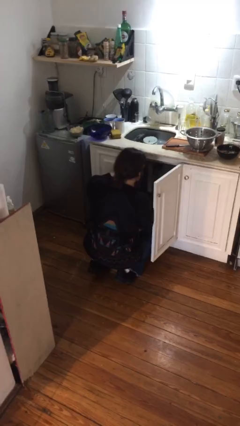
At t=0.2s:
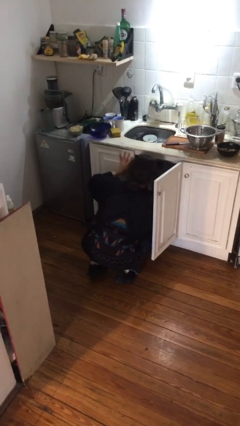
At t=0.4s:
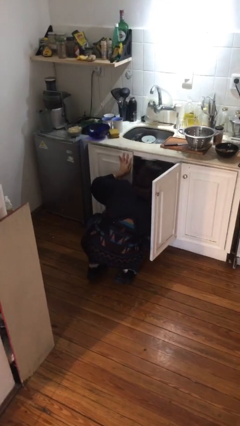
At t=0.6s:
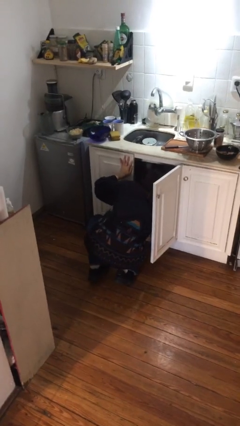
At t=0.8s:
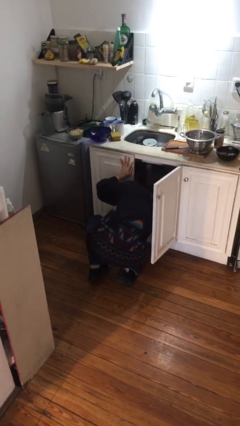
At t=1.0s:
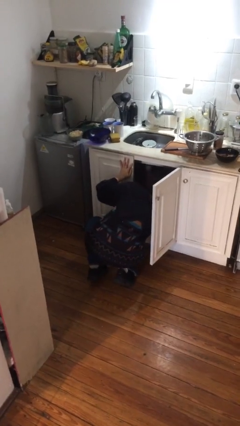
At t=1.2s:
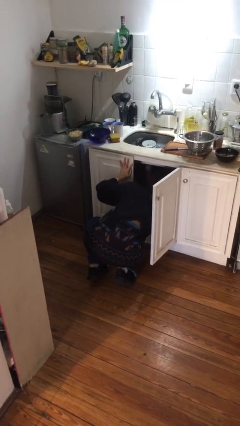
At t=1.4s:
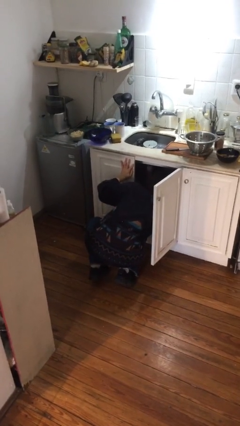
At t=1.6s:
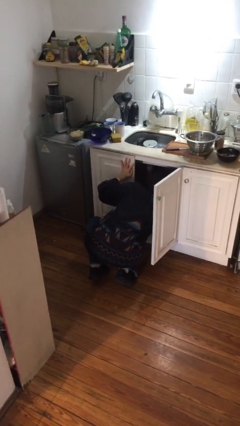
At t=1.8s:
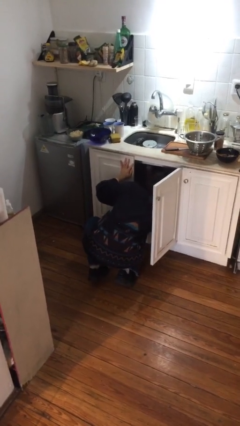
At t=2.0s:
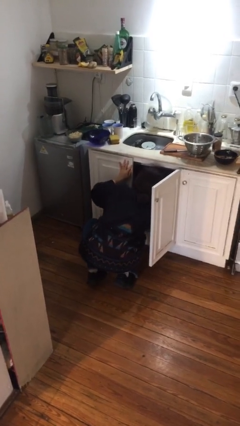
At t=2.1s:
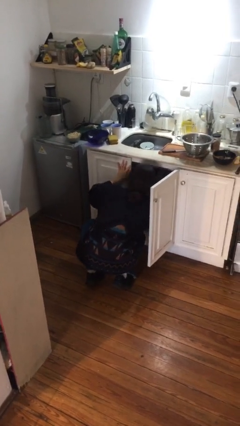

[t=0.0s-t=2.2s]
person searches in cabinet

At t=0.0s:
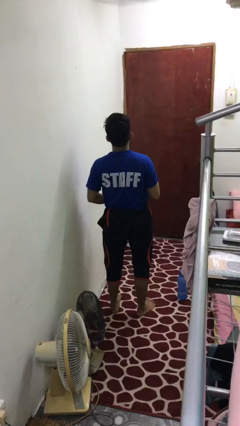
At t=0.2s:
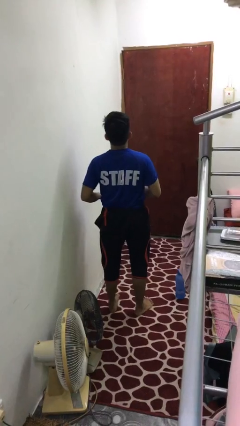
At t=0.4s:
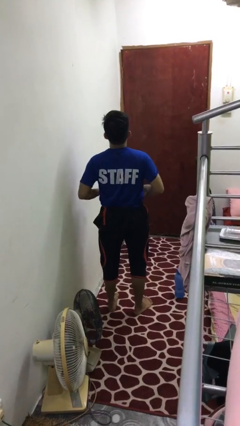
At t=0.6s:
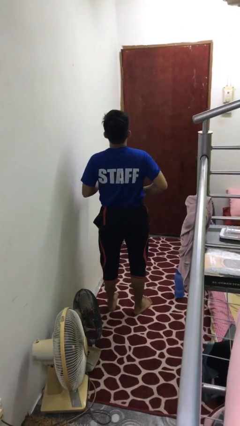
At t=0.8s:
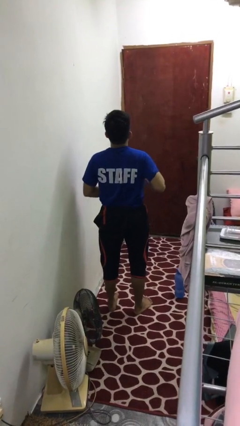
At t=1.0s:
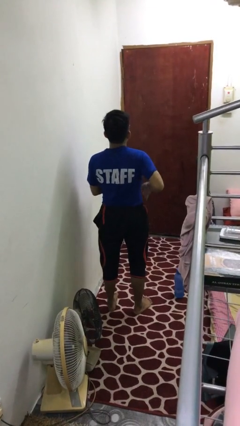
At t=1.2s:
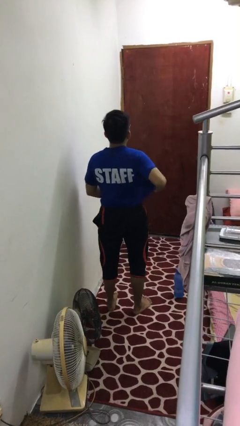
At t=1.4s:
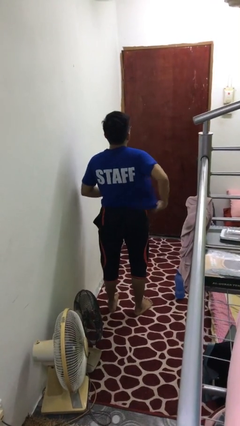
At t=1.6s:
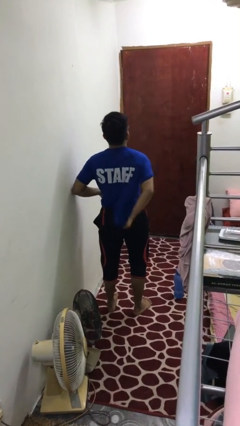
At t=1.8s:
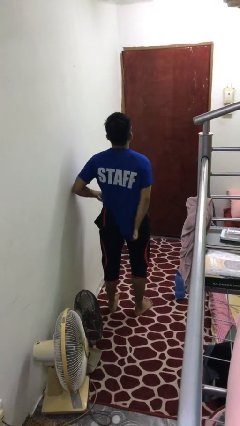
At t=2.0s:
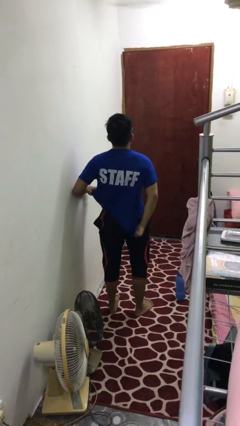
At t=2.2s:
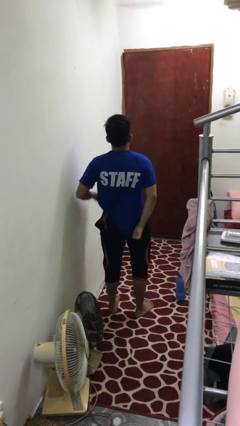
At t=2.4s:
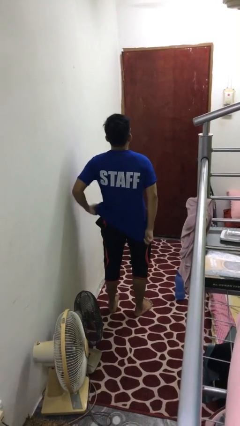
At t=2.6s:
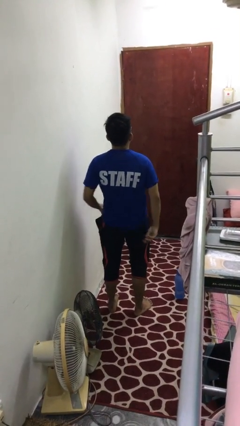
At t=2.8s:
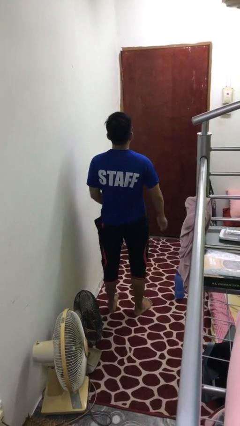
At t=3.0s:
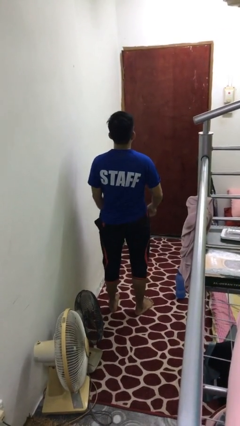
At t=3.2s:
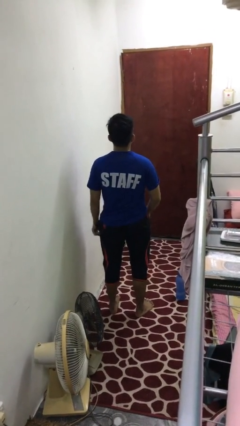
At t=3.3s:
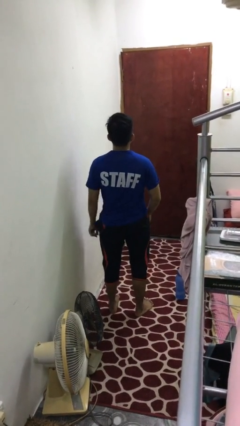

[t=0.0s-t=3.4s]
person untucks shirt

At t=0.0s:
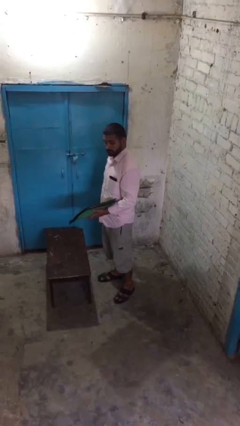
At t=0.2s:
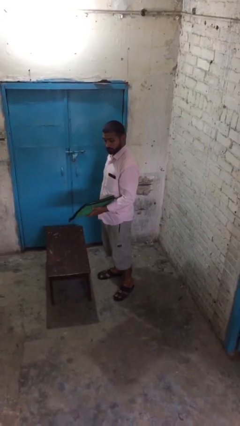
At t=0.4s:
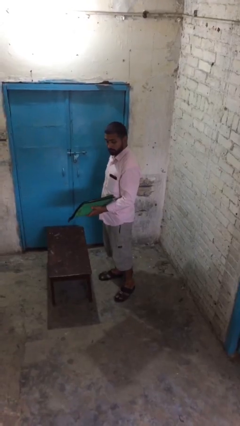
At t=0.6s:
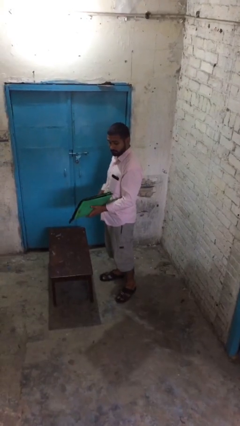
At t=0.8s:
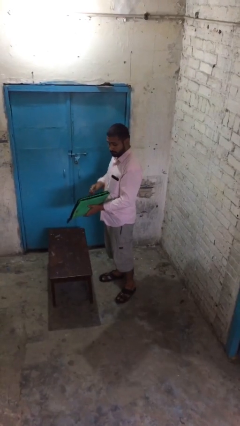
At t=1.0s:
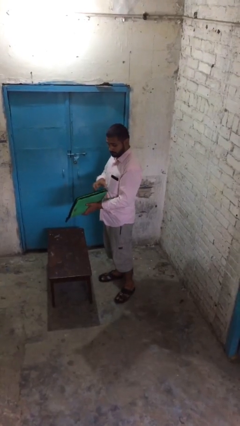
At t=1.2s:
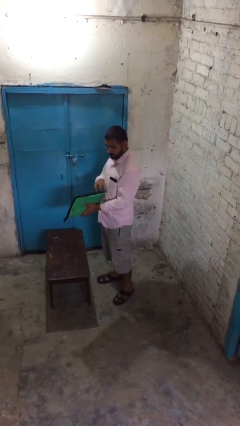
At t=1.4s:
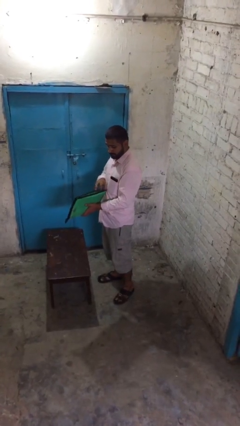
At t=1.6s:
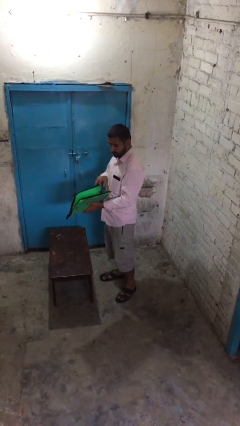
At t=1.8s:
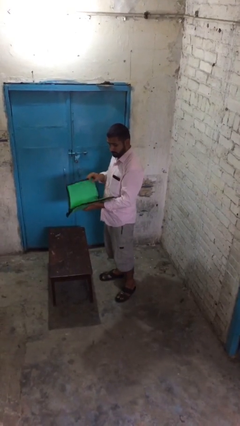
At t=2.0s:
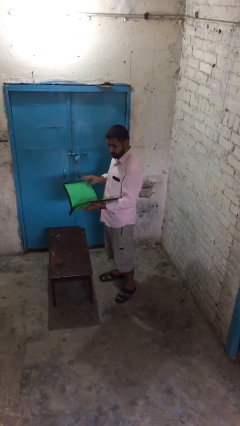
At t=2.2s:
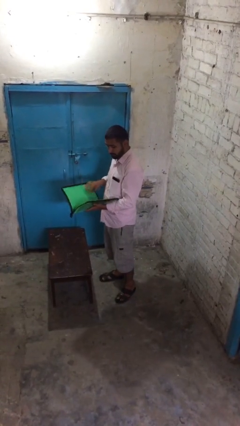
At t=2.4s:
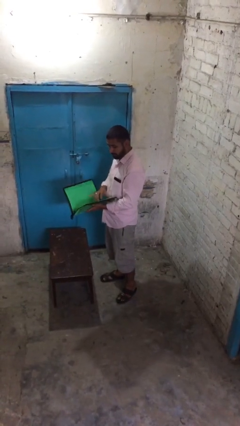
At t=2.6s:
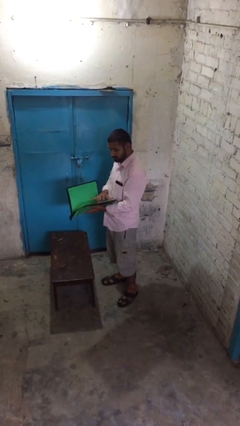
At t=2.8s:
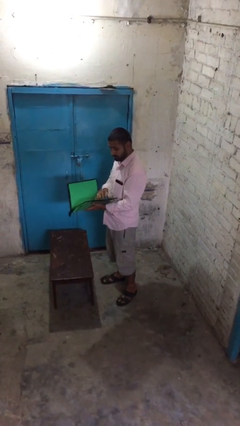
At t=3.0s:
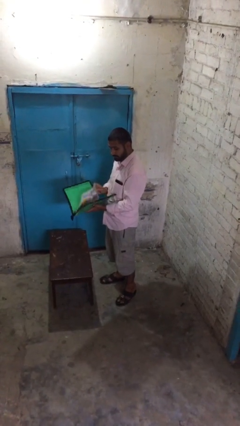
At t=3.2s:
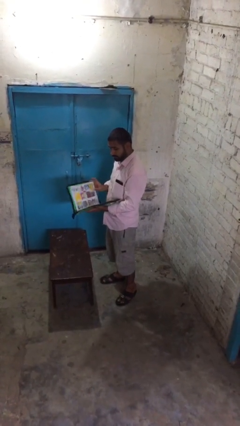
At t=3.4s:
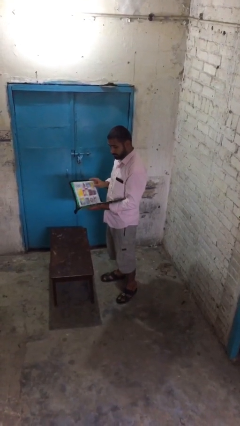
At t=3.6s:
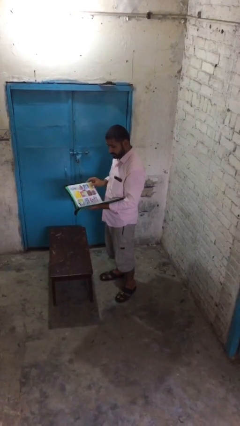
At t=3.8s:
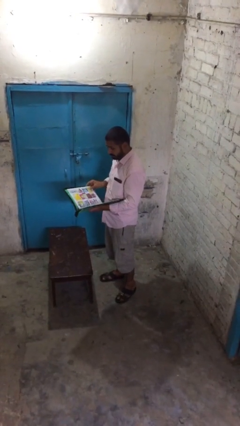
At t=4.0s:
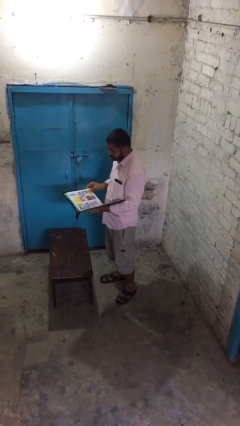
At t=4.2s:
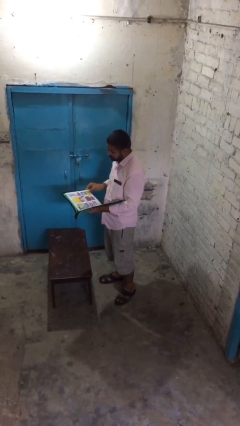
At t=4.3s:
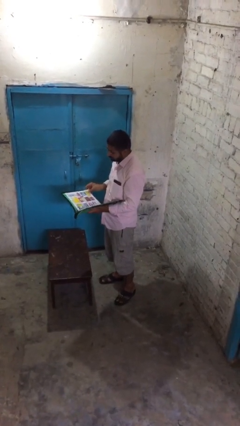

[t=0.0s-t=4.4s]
person reads document

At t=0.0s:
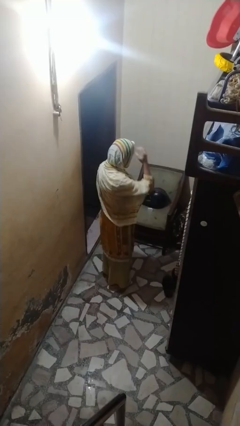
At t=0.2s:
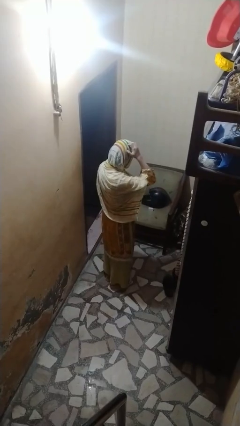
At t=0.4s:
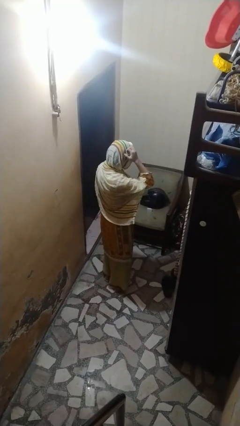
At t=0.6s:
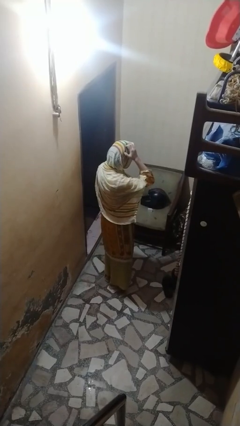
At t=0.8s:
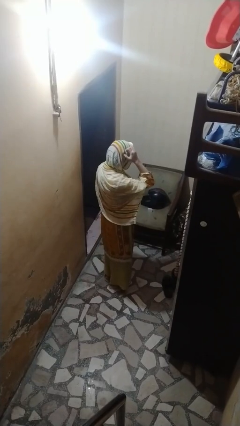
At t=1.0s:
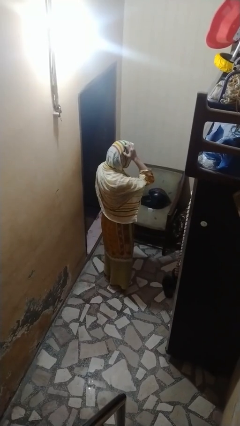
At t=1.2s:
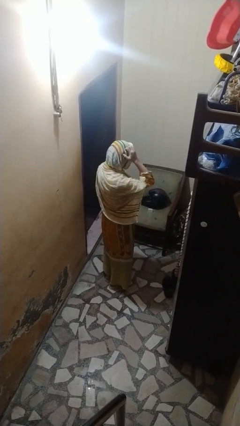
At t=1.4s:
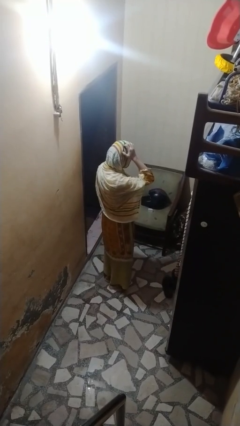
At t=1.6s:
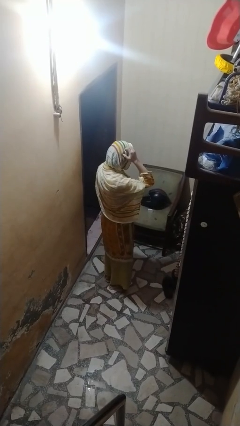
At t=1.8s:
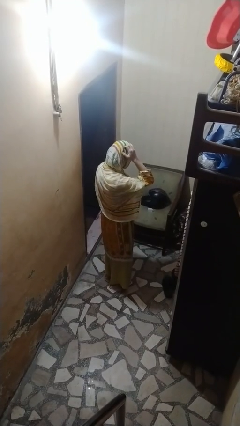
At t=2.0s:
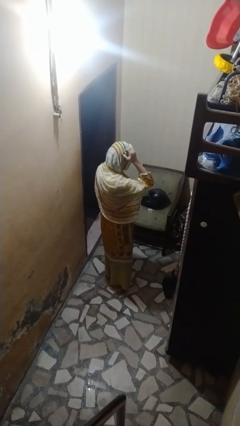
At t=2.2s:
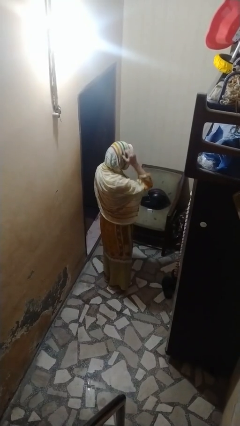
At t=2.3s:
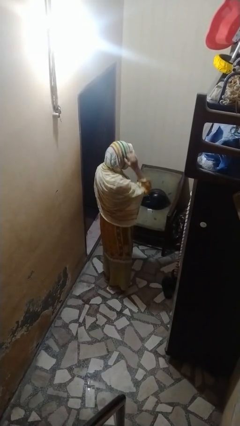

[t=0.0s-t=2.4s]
person scratches face

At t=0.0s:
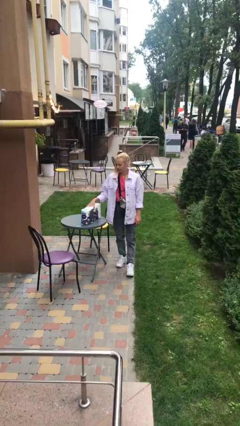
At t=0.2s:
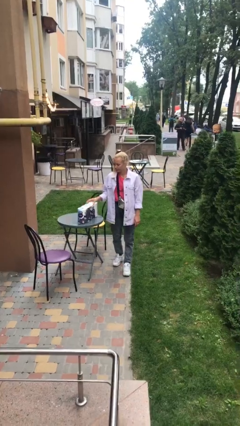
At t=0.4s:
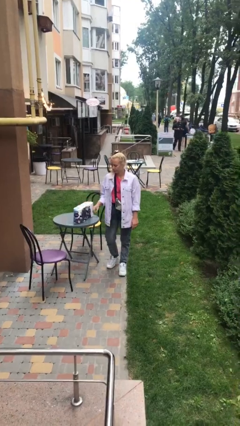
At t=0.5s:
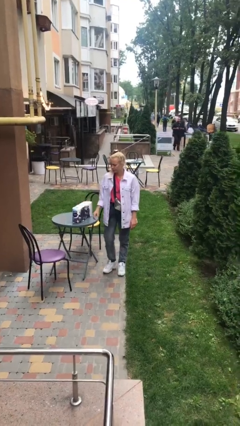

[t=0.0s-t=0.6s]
person puts down object on table

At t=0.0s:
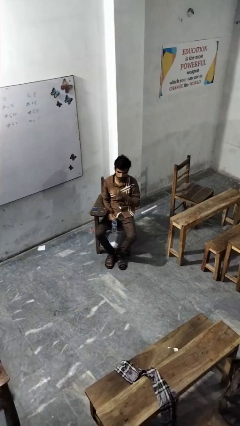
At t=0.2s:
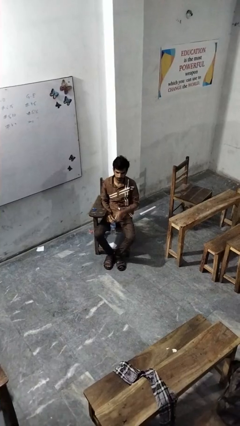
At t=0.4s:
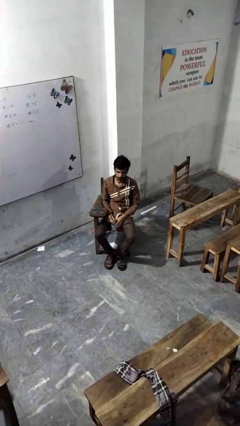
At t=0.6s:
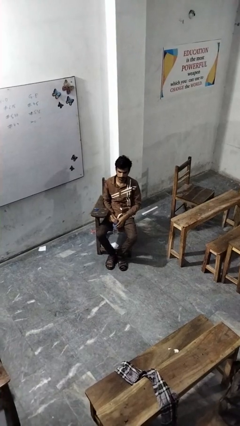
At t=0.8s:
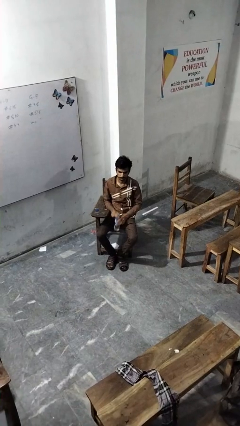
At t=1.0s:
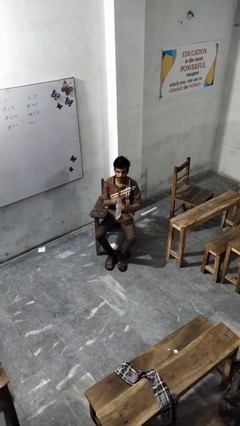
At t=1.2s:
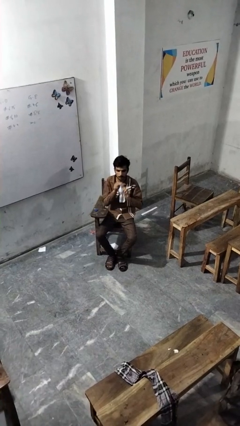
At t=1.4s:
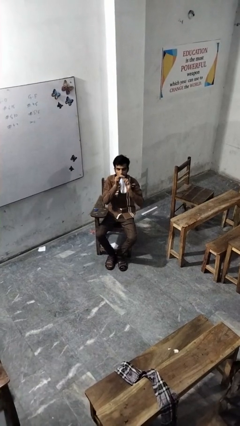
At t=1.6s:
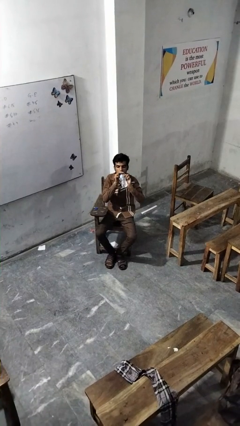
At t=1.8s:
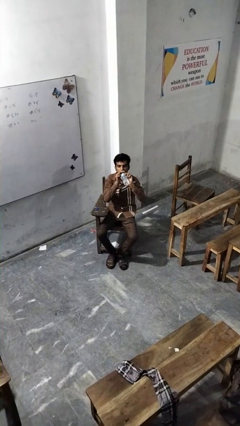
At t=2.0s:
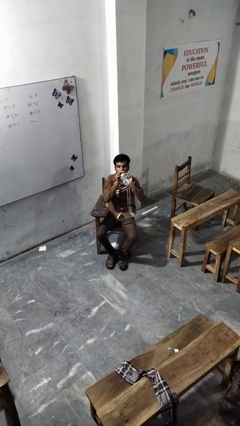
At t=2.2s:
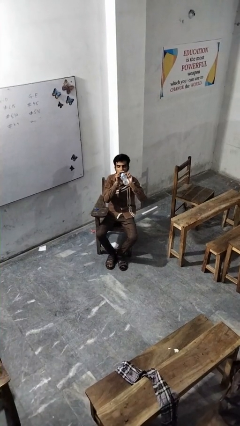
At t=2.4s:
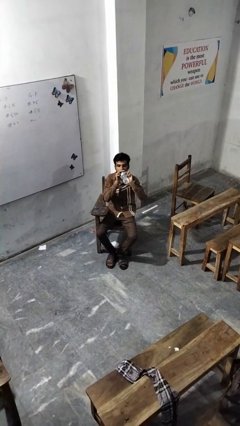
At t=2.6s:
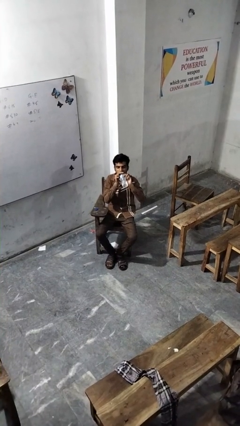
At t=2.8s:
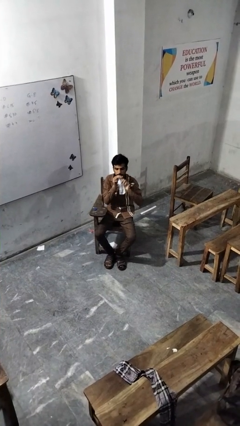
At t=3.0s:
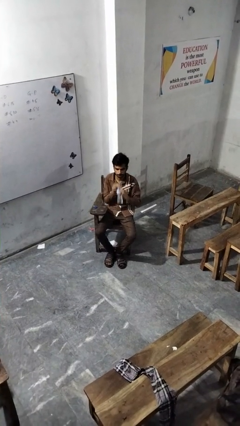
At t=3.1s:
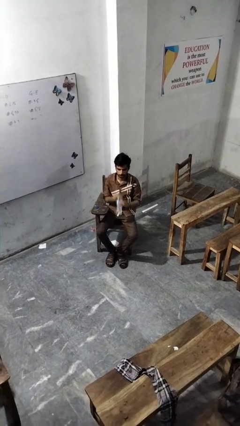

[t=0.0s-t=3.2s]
person drinks from bottle

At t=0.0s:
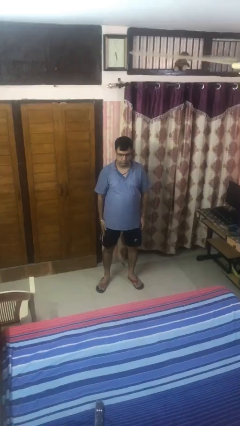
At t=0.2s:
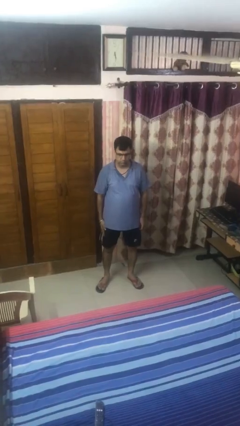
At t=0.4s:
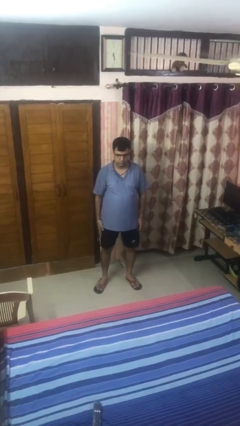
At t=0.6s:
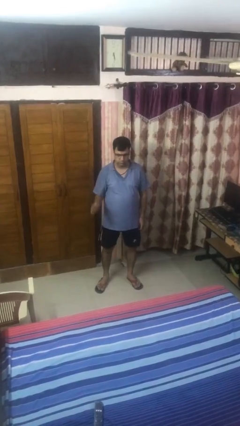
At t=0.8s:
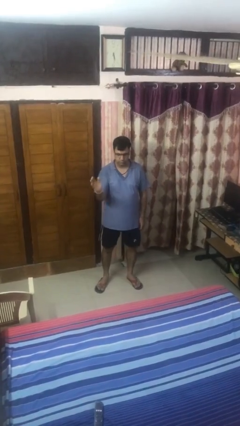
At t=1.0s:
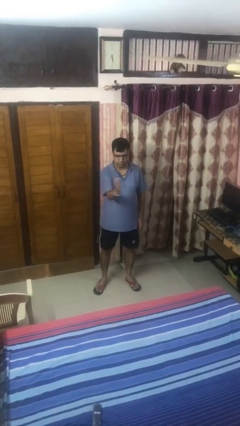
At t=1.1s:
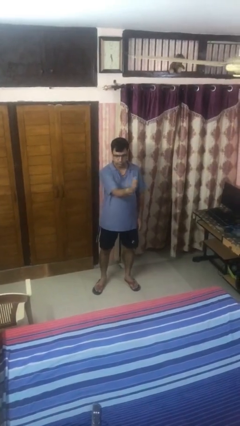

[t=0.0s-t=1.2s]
person gestures swipe left
